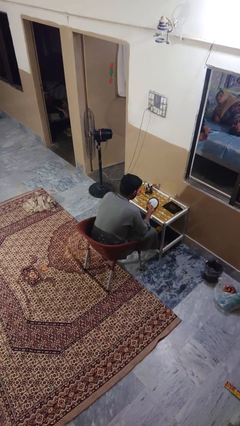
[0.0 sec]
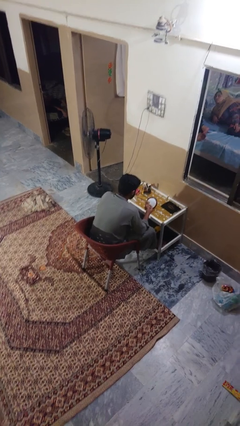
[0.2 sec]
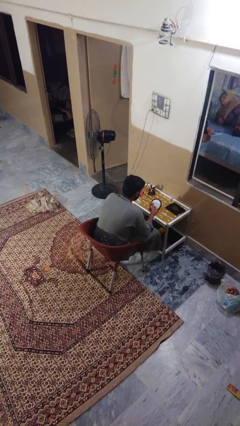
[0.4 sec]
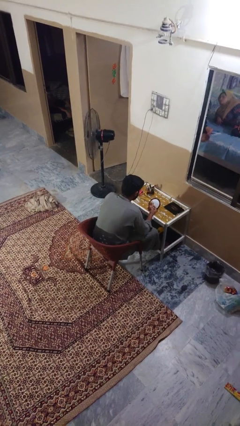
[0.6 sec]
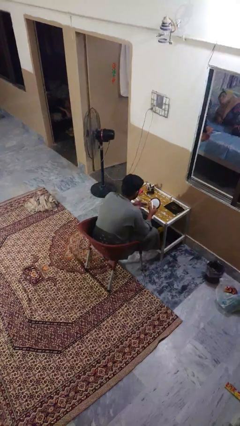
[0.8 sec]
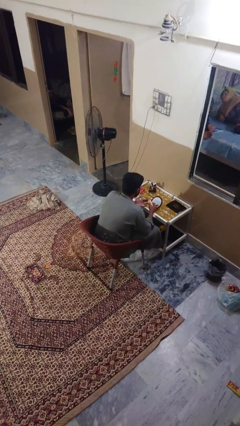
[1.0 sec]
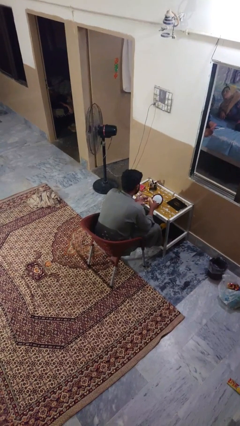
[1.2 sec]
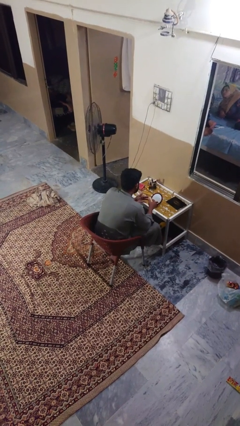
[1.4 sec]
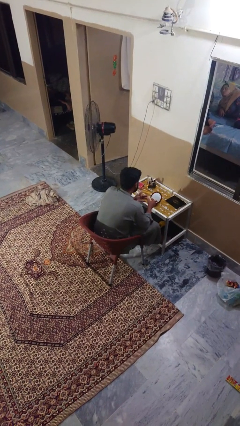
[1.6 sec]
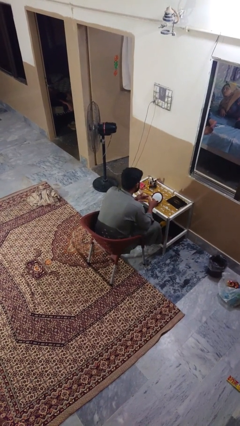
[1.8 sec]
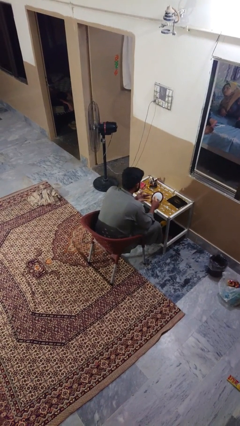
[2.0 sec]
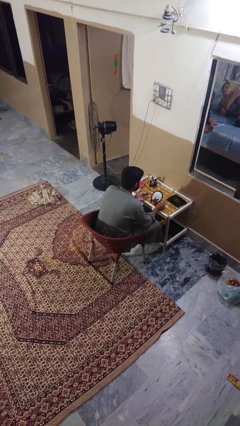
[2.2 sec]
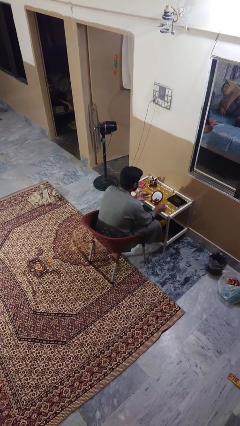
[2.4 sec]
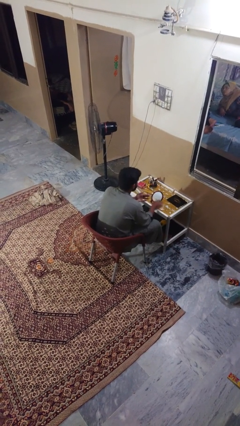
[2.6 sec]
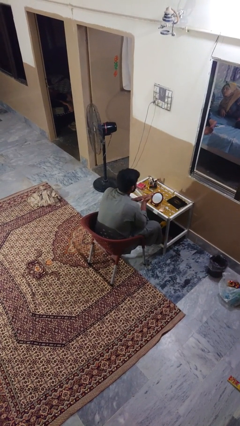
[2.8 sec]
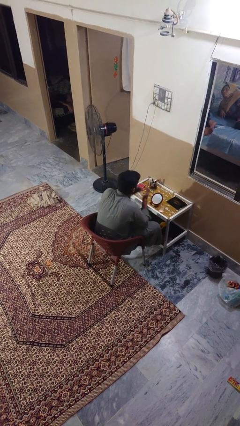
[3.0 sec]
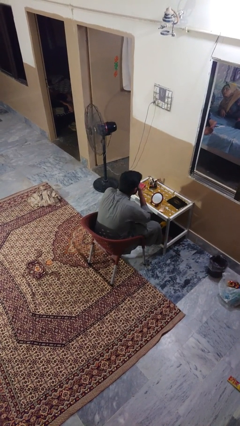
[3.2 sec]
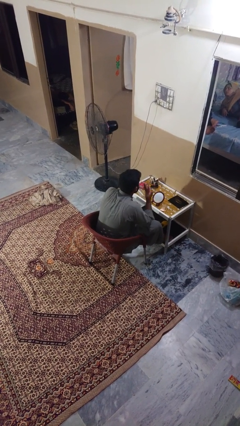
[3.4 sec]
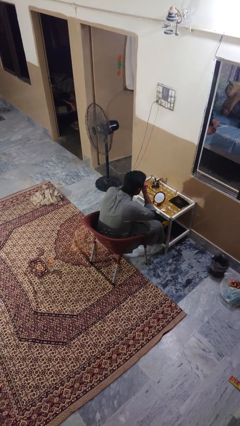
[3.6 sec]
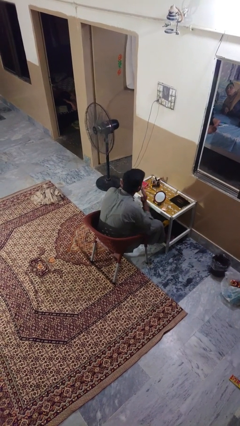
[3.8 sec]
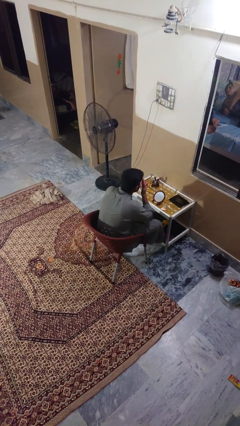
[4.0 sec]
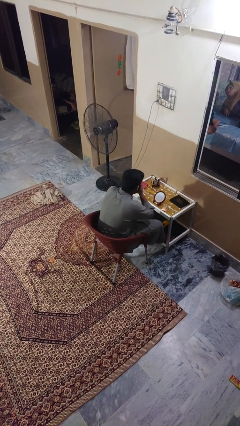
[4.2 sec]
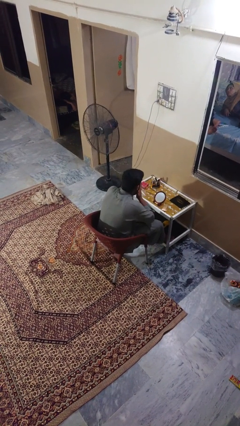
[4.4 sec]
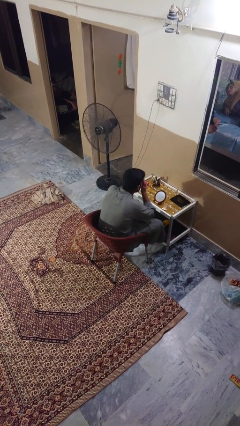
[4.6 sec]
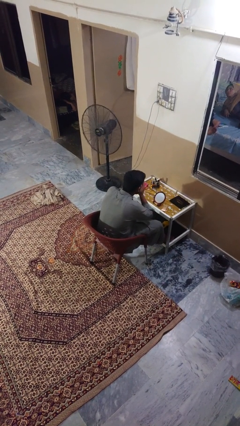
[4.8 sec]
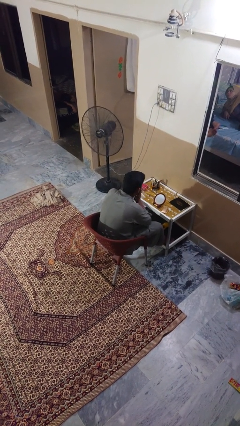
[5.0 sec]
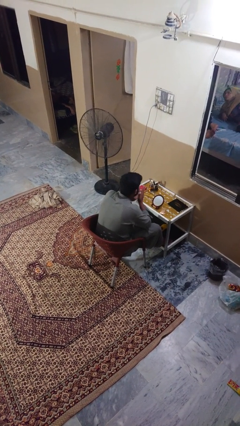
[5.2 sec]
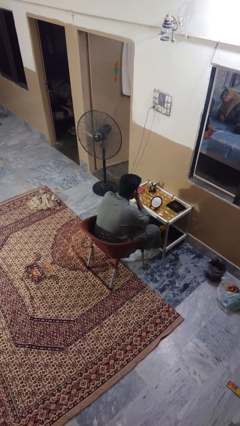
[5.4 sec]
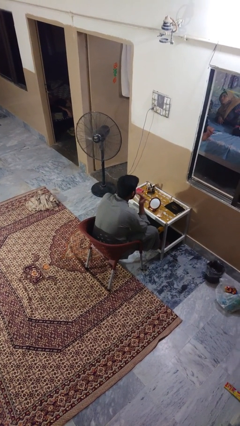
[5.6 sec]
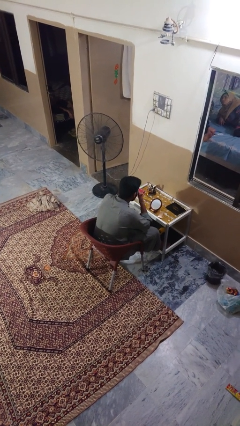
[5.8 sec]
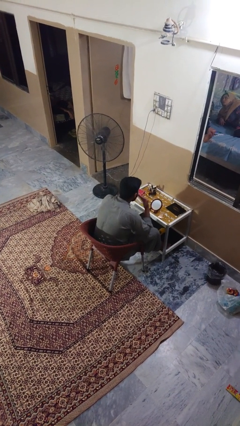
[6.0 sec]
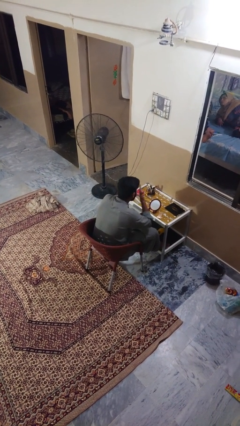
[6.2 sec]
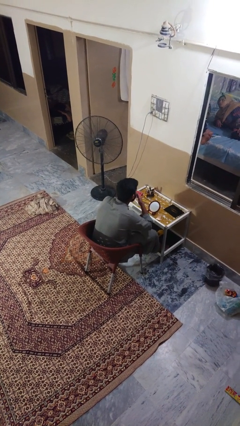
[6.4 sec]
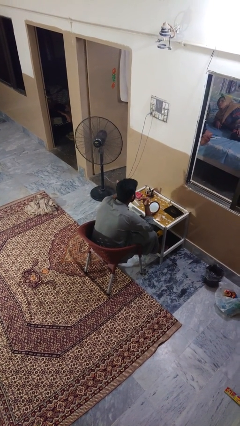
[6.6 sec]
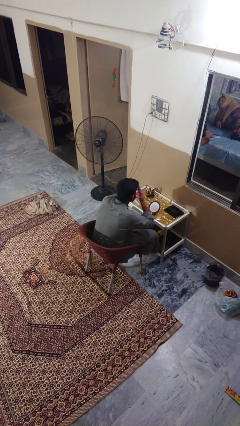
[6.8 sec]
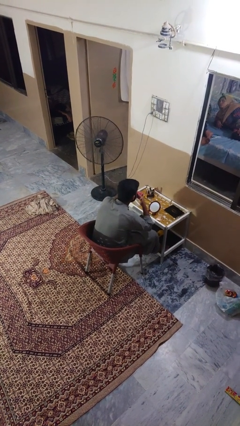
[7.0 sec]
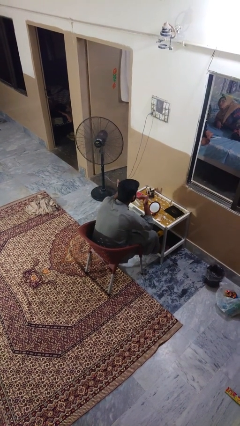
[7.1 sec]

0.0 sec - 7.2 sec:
person applies foundation makeup

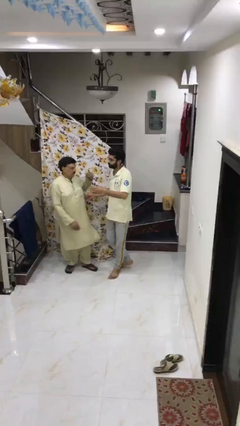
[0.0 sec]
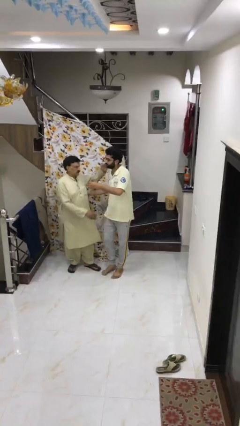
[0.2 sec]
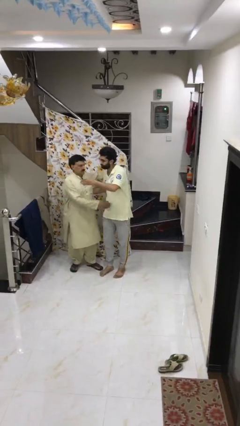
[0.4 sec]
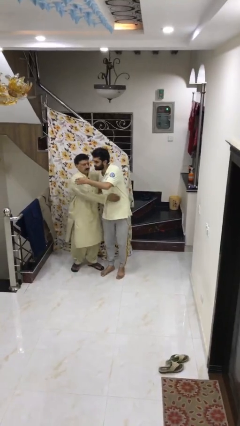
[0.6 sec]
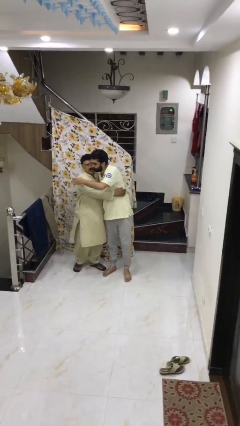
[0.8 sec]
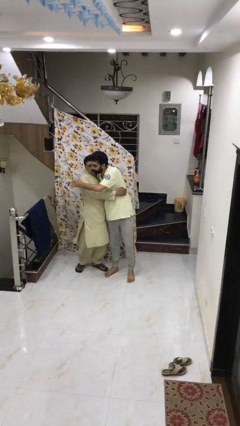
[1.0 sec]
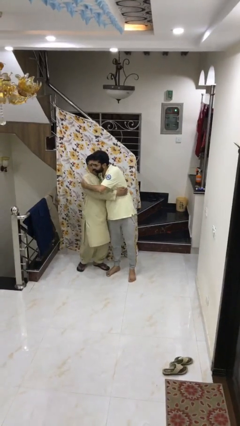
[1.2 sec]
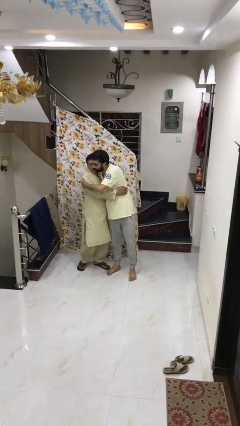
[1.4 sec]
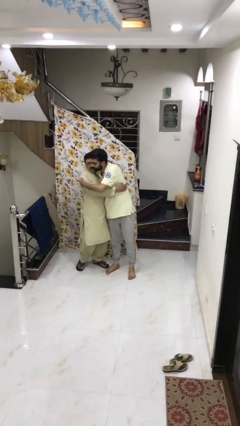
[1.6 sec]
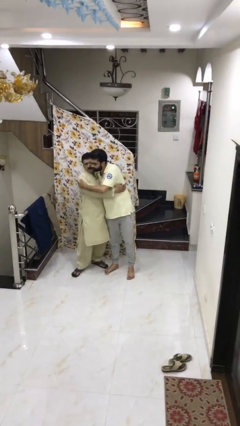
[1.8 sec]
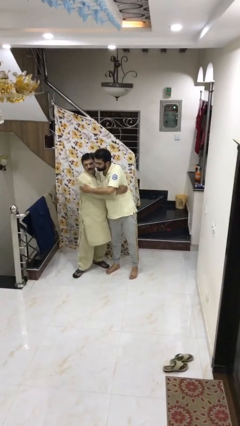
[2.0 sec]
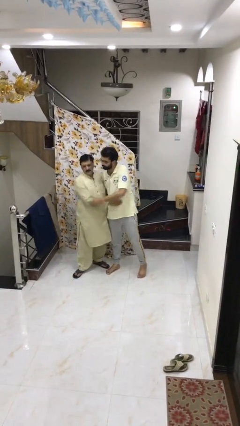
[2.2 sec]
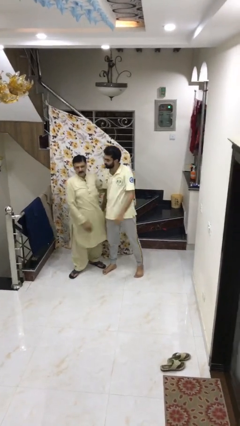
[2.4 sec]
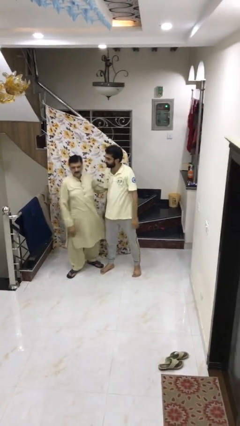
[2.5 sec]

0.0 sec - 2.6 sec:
person embraces person

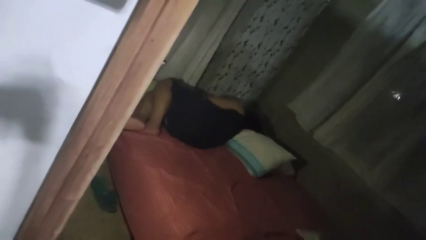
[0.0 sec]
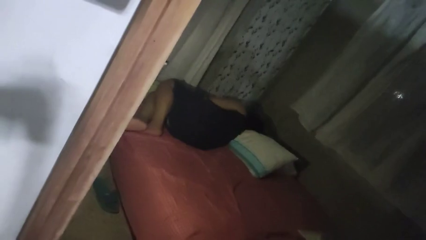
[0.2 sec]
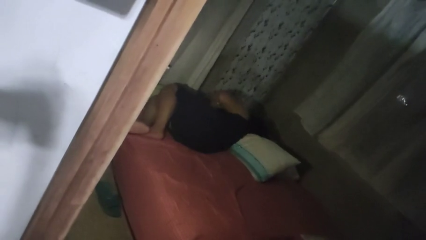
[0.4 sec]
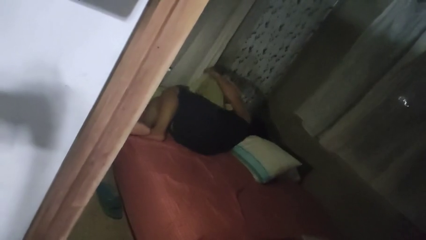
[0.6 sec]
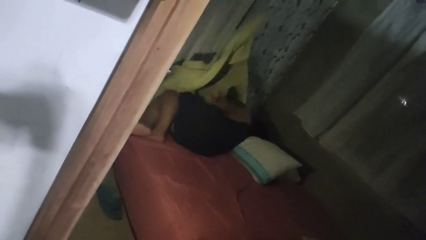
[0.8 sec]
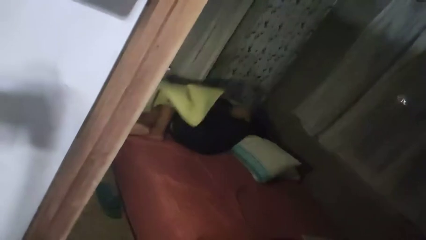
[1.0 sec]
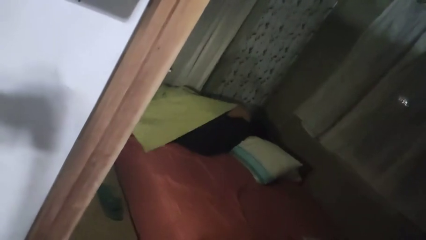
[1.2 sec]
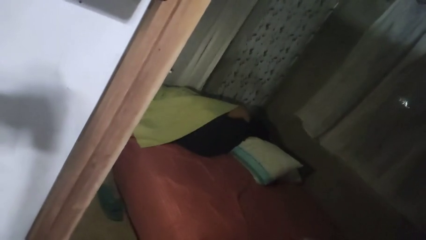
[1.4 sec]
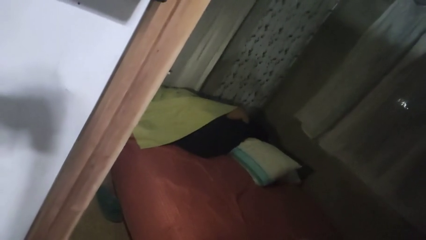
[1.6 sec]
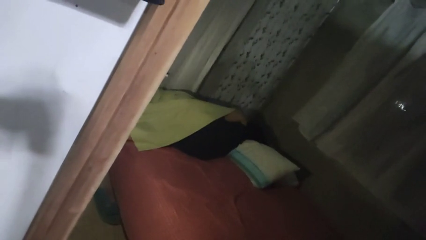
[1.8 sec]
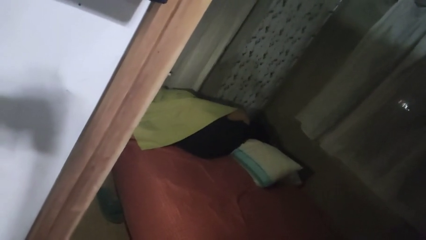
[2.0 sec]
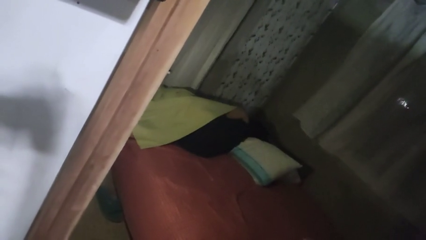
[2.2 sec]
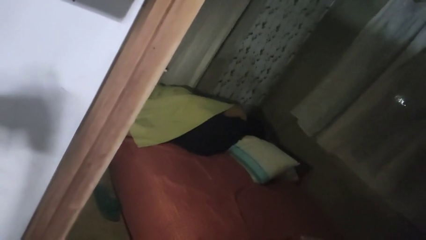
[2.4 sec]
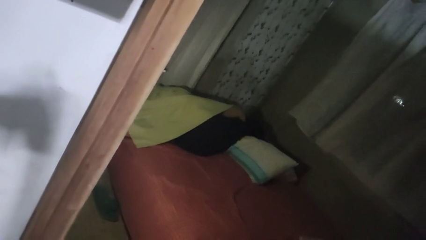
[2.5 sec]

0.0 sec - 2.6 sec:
person covers with bedsheets

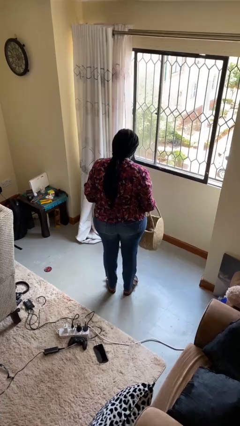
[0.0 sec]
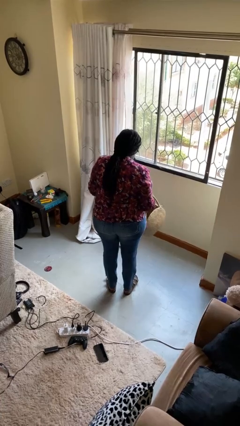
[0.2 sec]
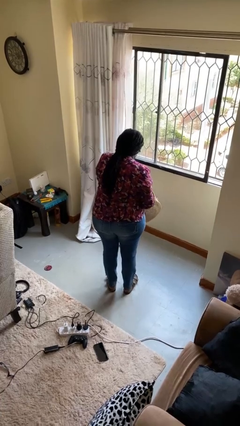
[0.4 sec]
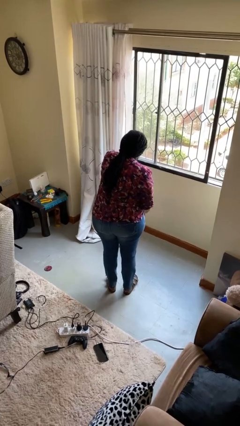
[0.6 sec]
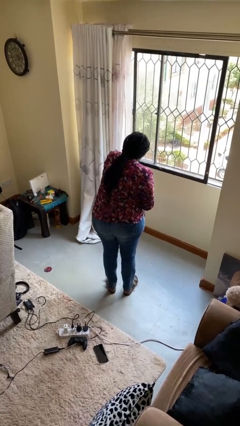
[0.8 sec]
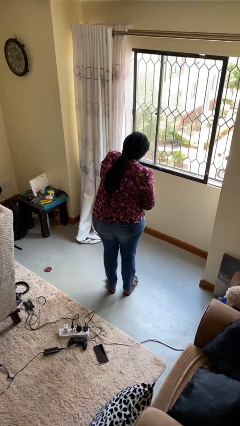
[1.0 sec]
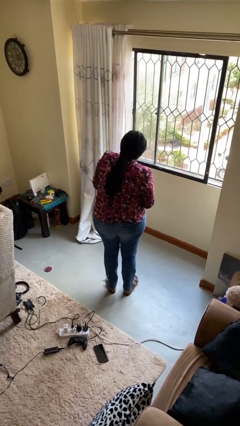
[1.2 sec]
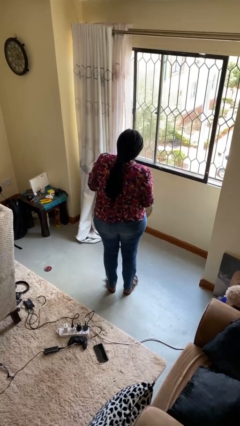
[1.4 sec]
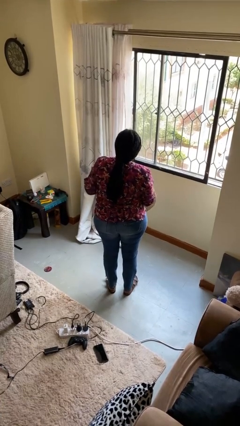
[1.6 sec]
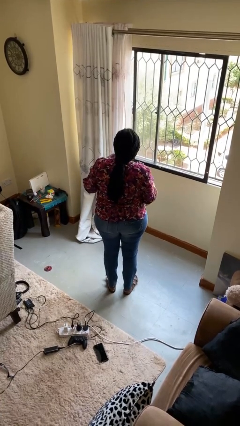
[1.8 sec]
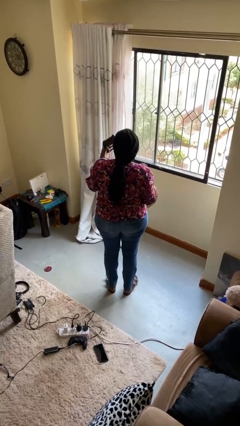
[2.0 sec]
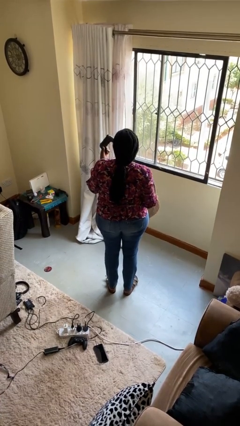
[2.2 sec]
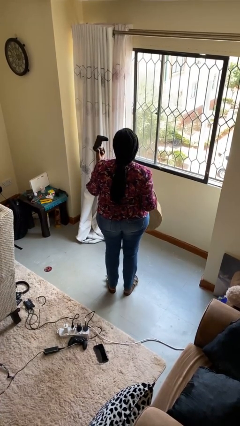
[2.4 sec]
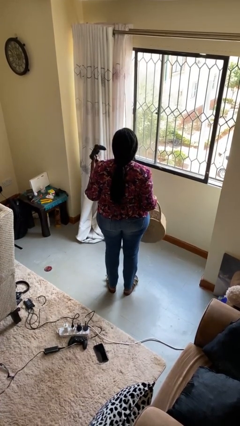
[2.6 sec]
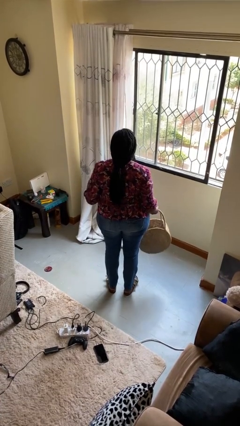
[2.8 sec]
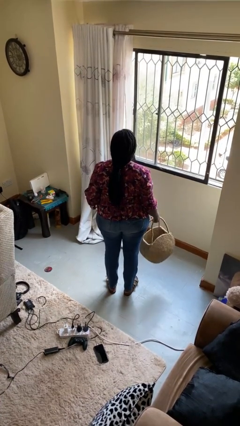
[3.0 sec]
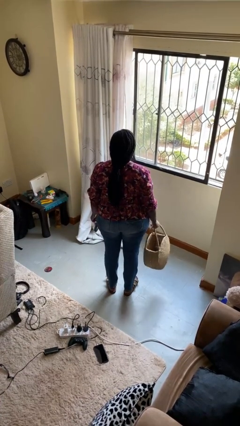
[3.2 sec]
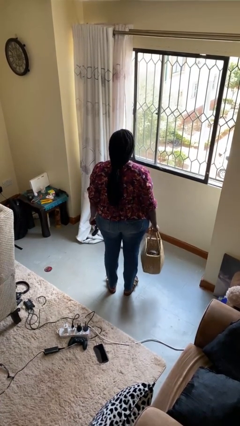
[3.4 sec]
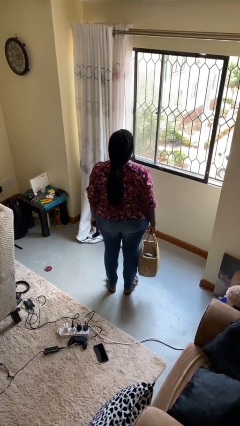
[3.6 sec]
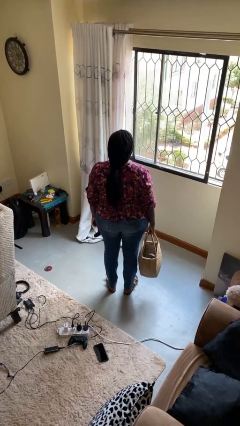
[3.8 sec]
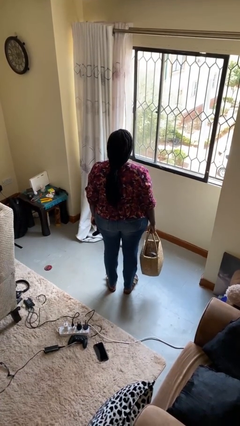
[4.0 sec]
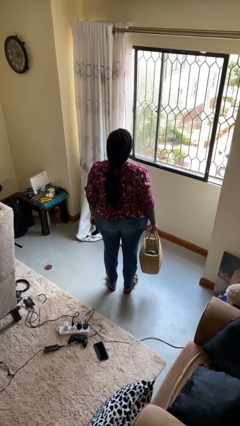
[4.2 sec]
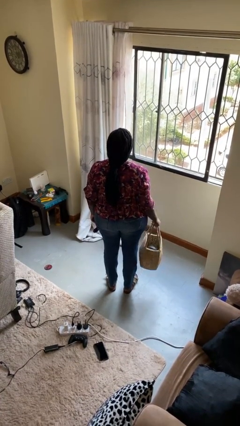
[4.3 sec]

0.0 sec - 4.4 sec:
person takes object from basket

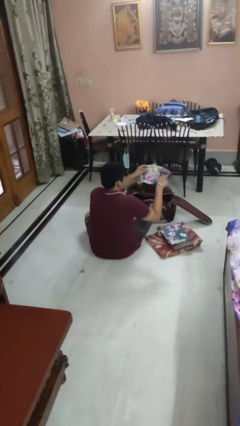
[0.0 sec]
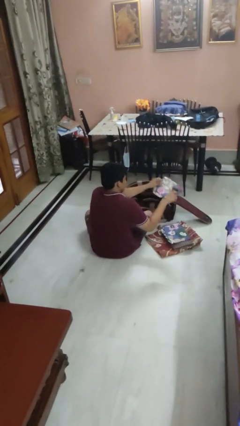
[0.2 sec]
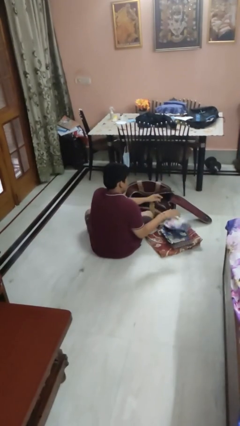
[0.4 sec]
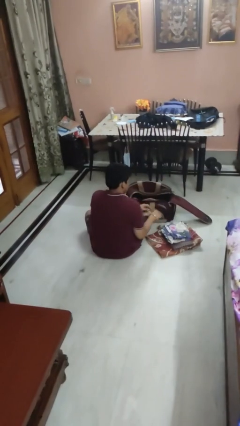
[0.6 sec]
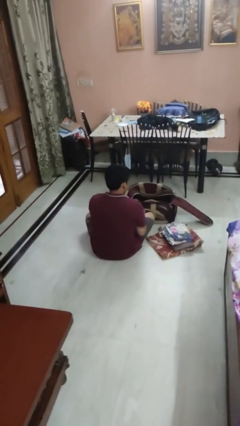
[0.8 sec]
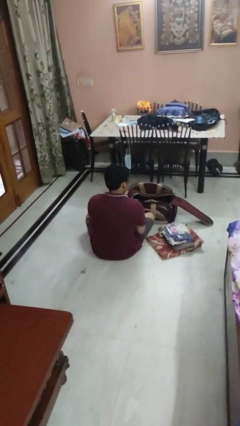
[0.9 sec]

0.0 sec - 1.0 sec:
person unloads clothes from suitcase
